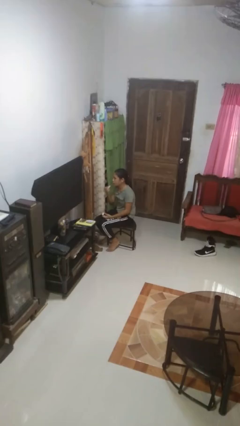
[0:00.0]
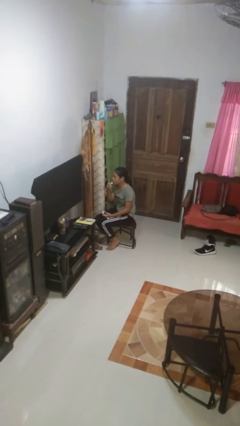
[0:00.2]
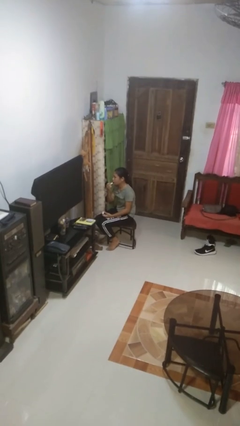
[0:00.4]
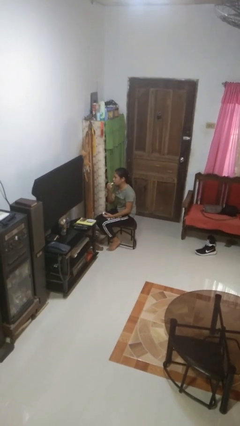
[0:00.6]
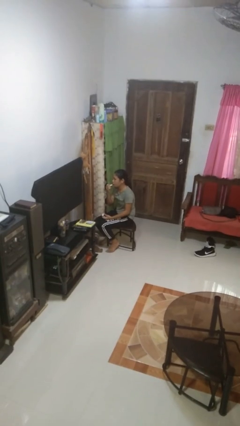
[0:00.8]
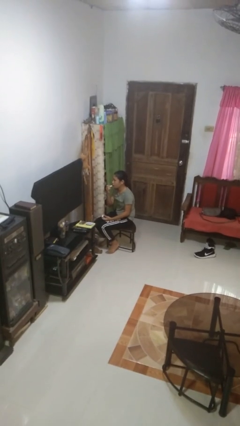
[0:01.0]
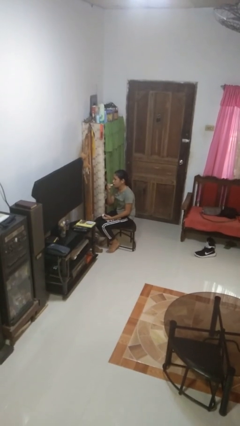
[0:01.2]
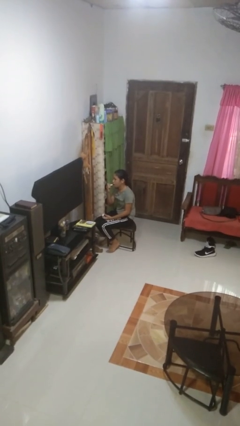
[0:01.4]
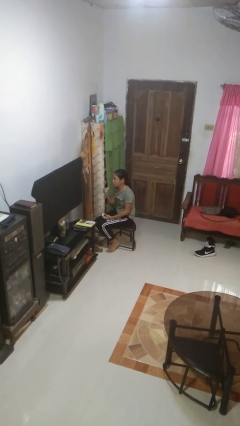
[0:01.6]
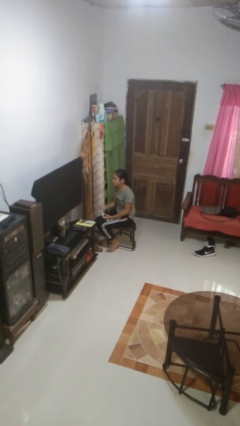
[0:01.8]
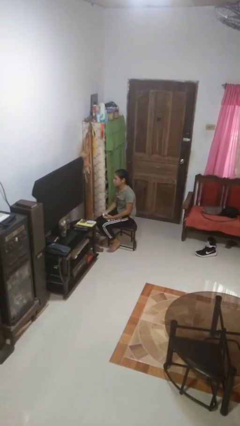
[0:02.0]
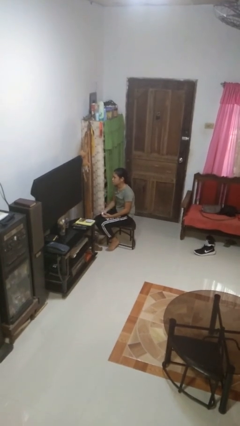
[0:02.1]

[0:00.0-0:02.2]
person applies lip makeup

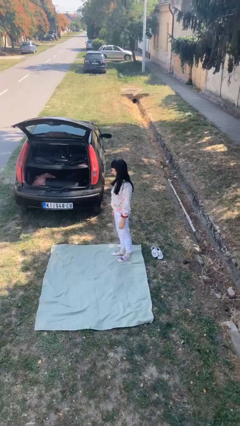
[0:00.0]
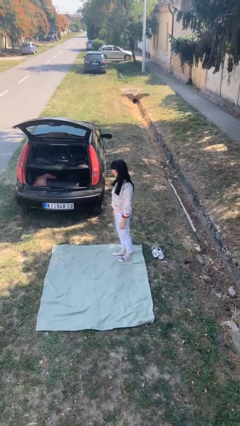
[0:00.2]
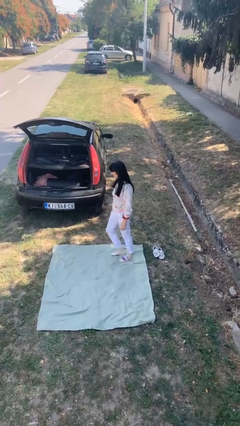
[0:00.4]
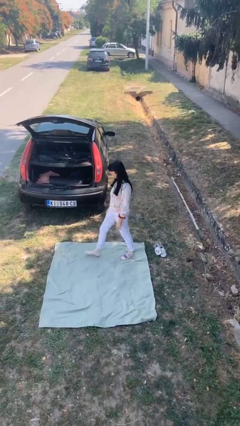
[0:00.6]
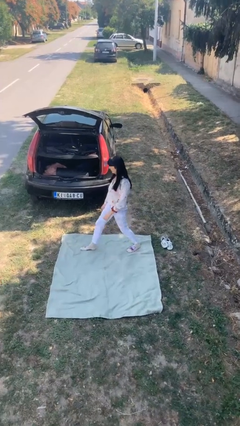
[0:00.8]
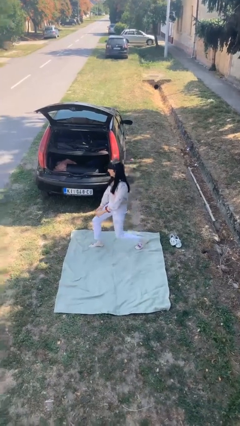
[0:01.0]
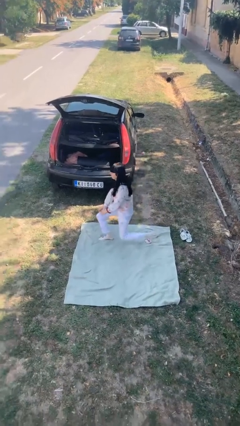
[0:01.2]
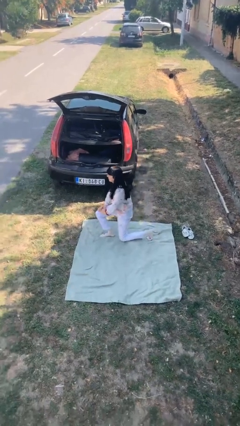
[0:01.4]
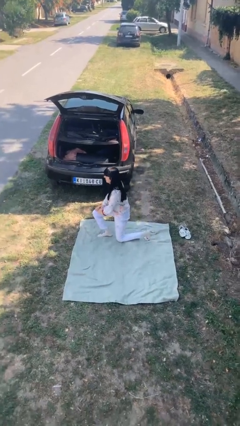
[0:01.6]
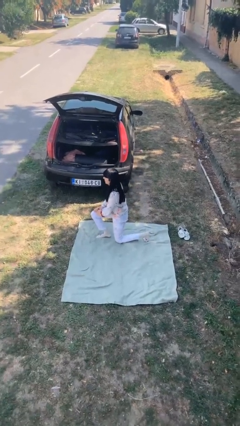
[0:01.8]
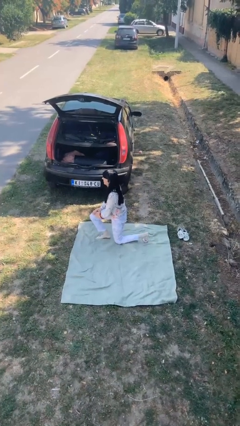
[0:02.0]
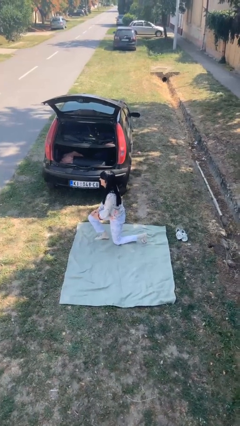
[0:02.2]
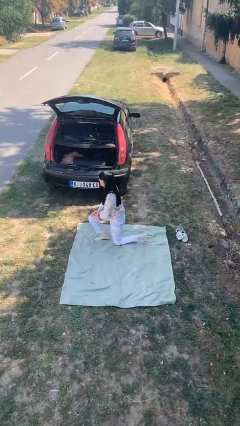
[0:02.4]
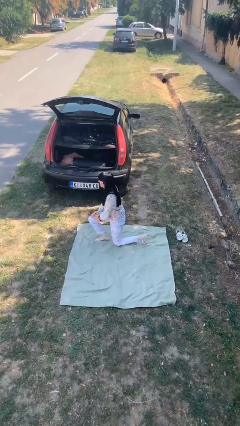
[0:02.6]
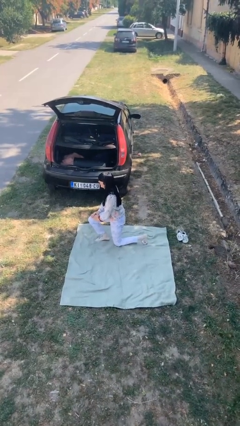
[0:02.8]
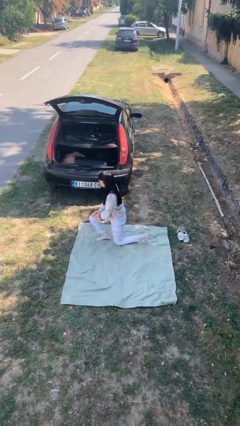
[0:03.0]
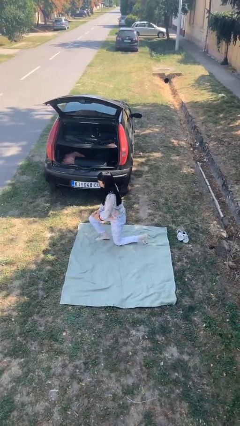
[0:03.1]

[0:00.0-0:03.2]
person kneels

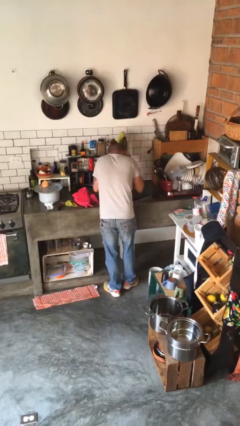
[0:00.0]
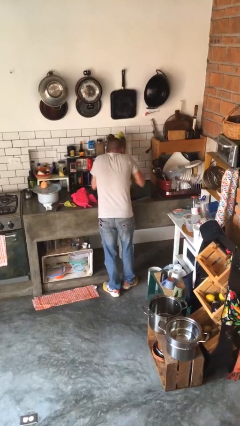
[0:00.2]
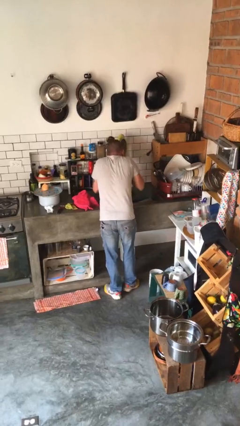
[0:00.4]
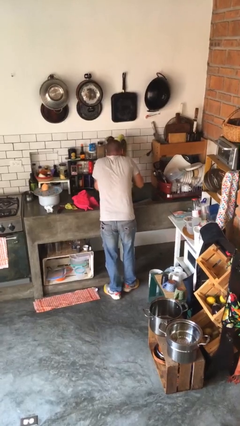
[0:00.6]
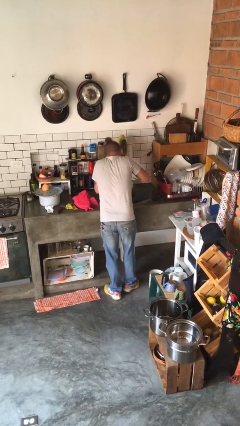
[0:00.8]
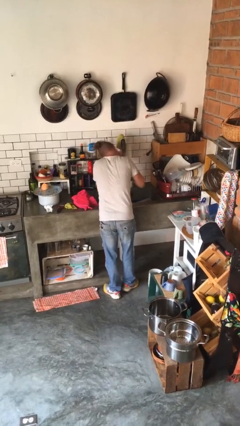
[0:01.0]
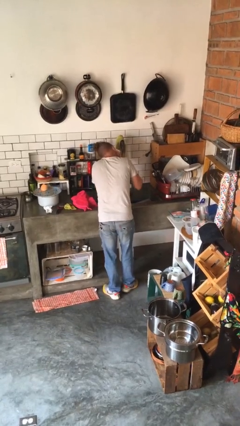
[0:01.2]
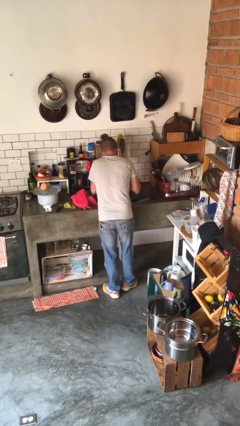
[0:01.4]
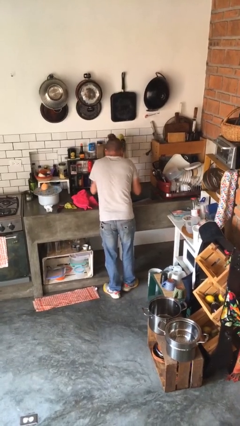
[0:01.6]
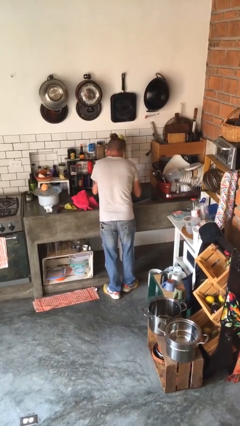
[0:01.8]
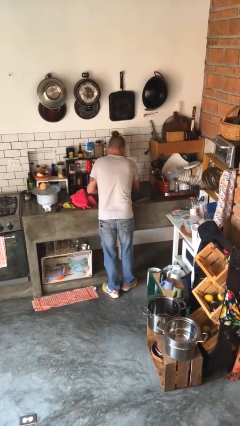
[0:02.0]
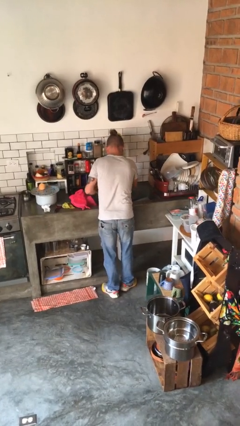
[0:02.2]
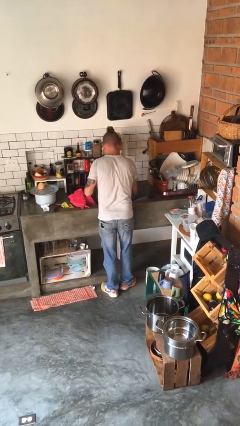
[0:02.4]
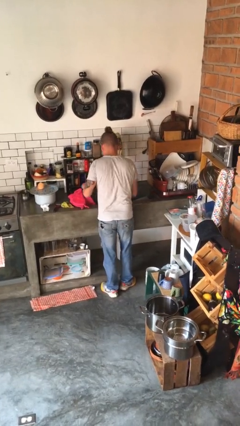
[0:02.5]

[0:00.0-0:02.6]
person washes face

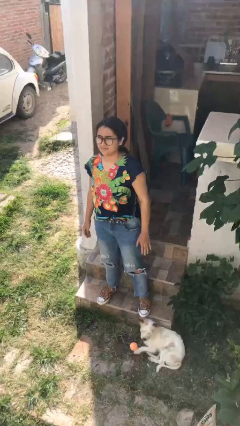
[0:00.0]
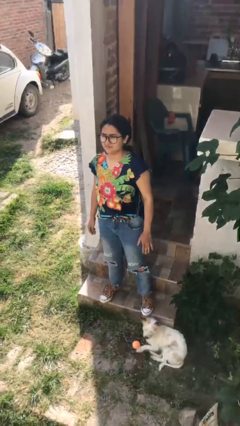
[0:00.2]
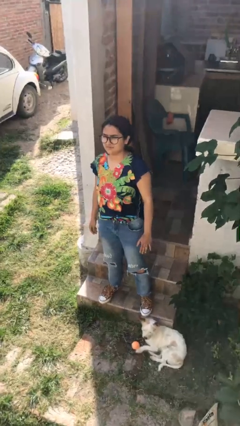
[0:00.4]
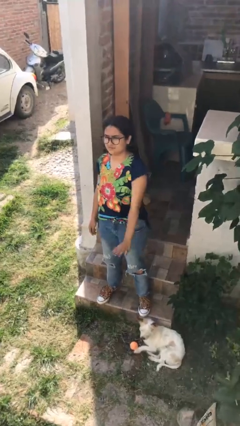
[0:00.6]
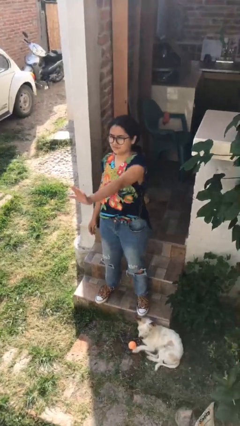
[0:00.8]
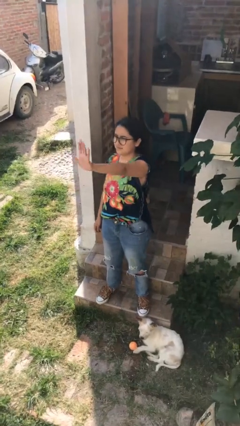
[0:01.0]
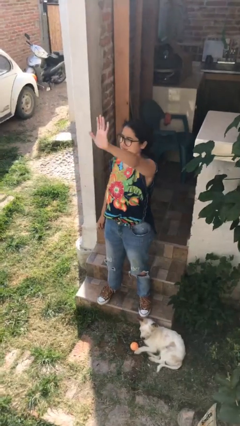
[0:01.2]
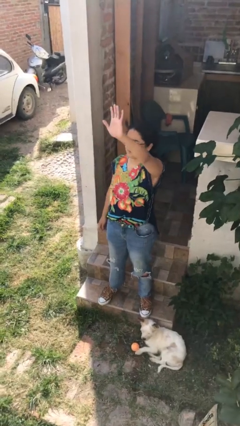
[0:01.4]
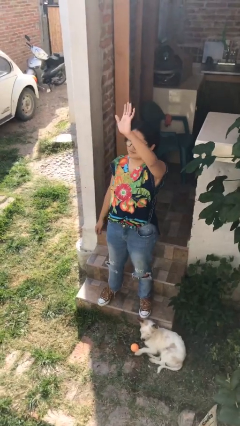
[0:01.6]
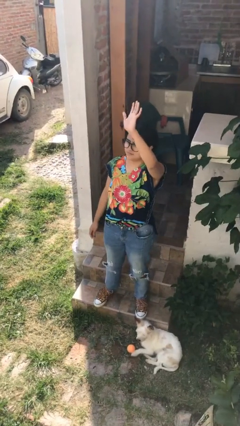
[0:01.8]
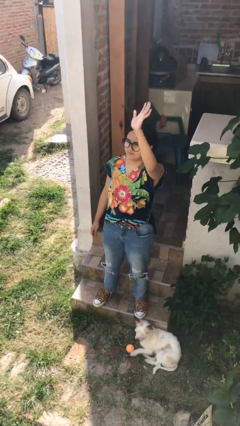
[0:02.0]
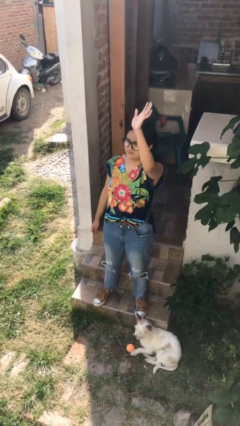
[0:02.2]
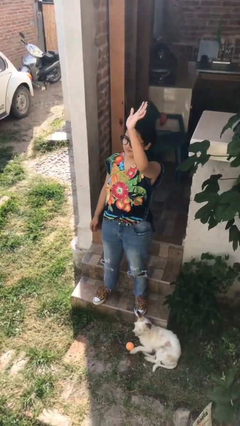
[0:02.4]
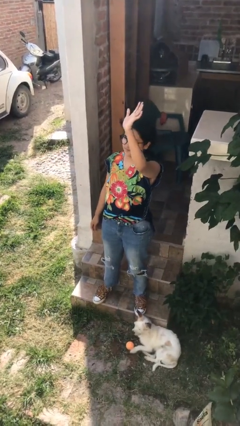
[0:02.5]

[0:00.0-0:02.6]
person gestures swipe up

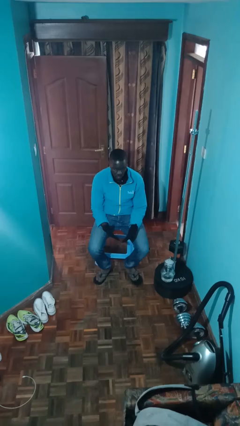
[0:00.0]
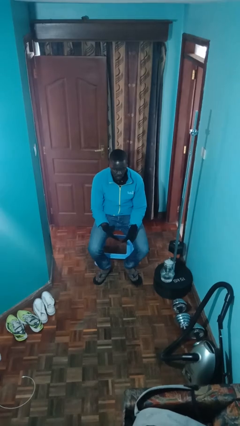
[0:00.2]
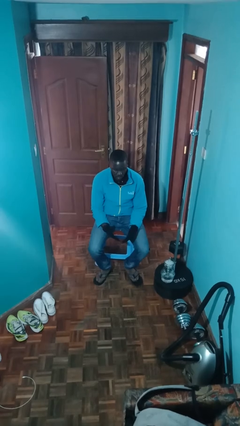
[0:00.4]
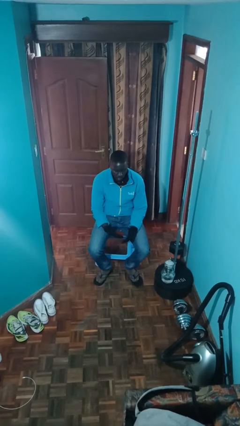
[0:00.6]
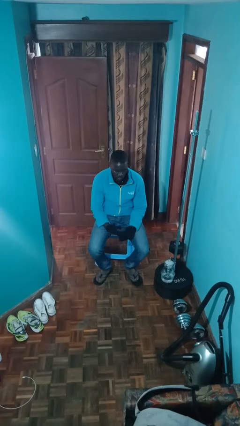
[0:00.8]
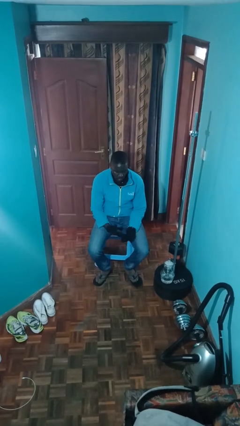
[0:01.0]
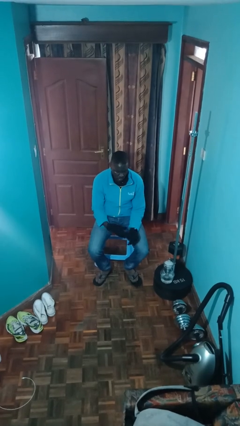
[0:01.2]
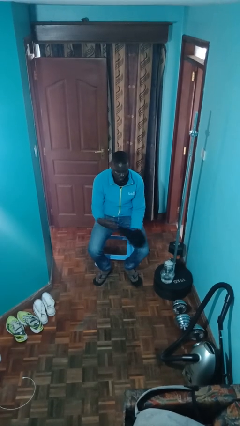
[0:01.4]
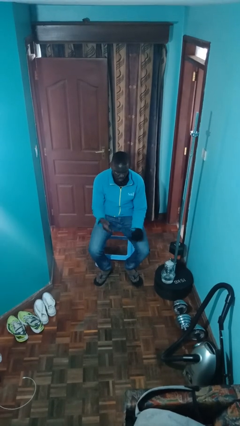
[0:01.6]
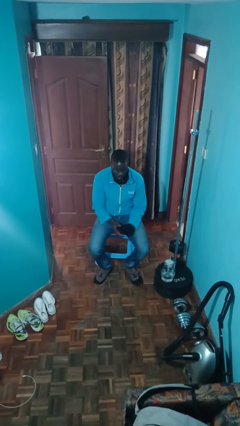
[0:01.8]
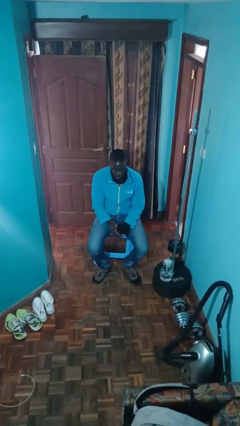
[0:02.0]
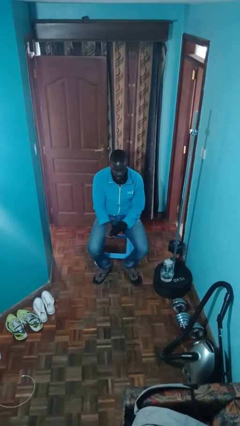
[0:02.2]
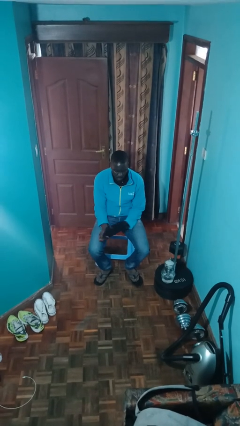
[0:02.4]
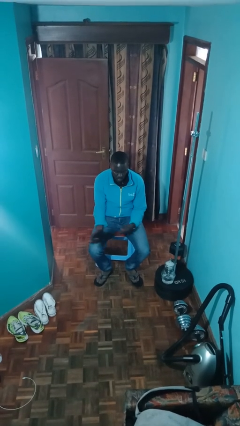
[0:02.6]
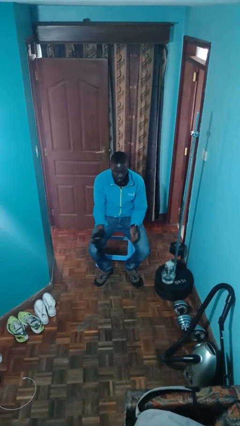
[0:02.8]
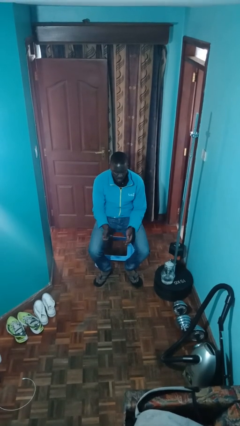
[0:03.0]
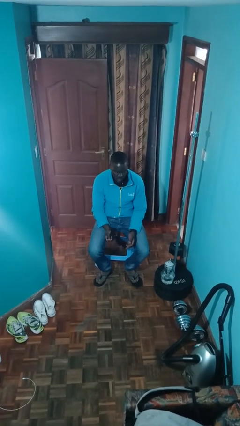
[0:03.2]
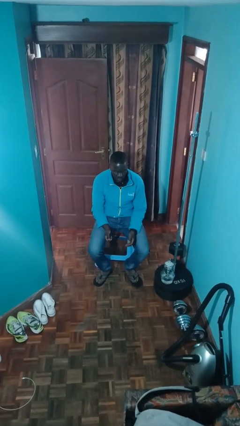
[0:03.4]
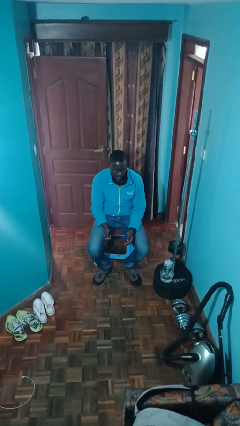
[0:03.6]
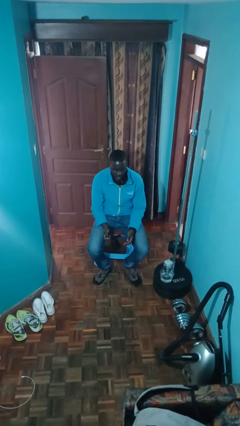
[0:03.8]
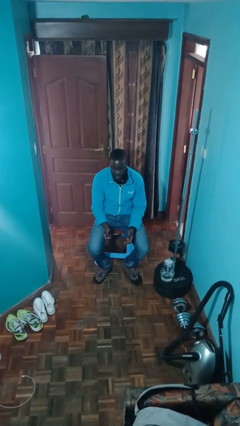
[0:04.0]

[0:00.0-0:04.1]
person takes off gloves

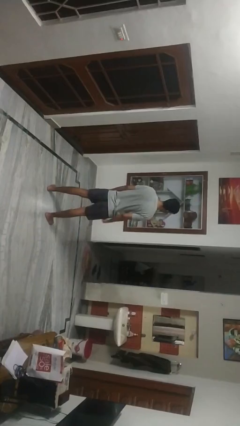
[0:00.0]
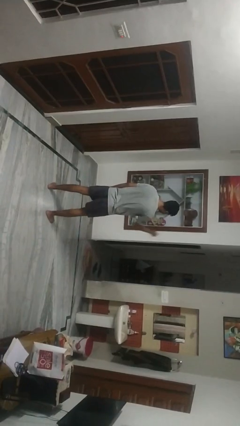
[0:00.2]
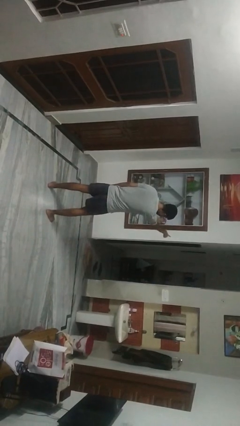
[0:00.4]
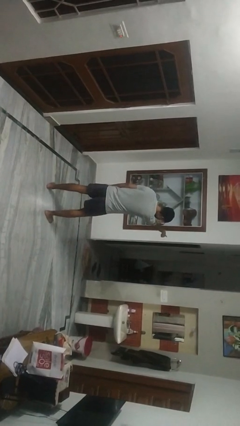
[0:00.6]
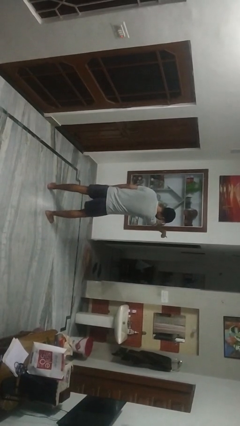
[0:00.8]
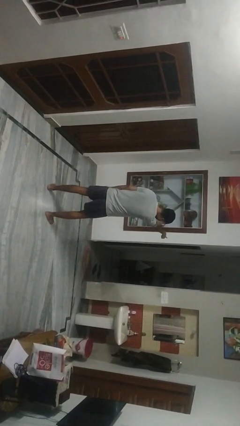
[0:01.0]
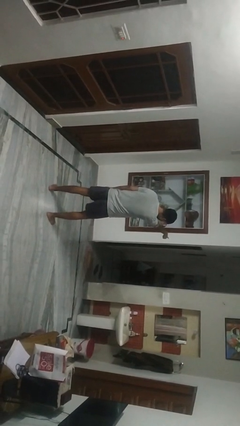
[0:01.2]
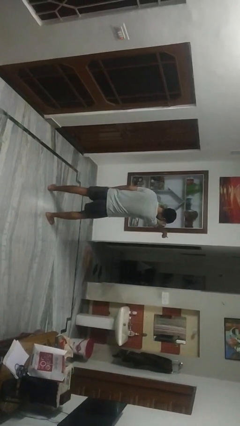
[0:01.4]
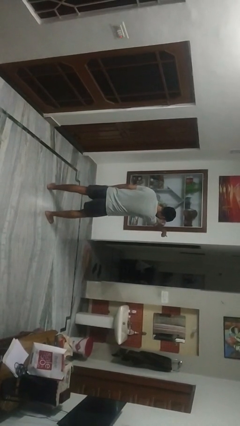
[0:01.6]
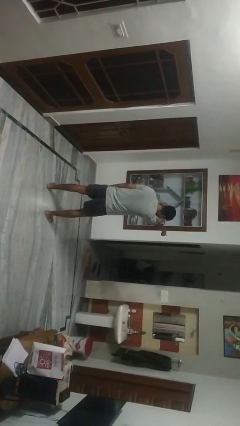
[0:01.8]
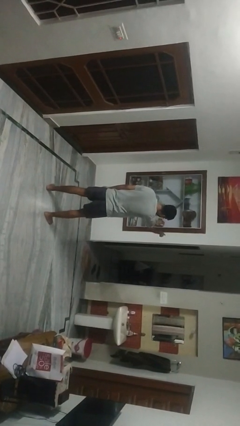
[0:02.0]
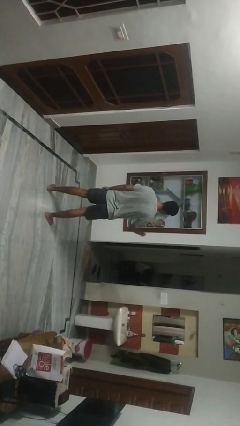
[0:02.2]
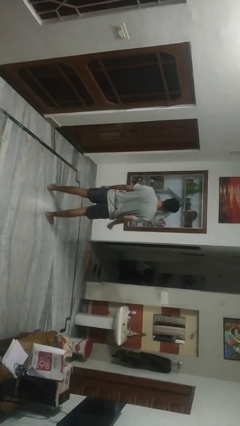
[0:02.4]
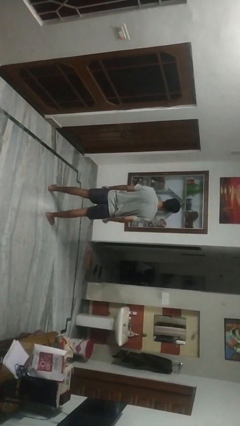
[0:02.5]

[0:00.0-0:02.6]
person points at person
